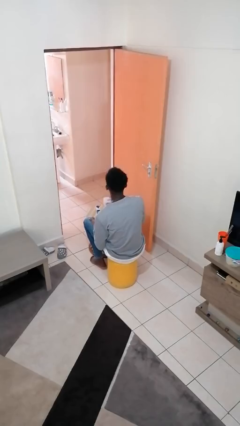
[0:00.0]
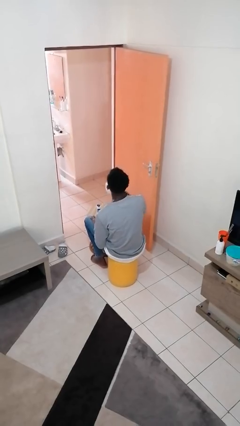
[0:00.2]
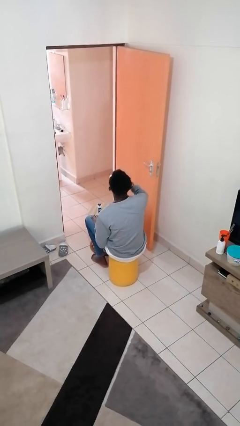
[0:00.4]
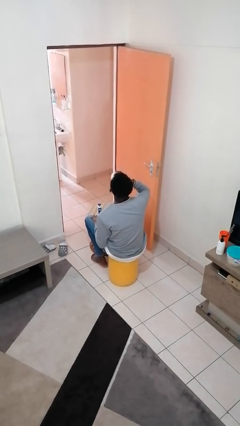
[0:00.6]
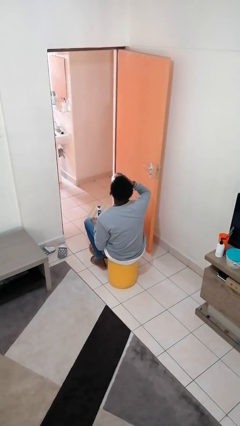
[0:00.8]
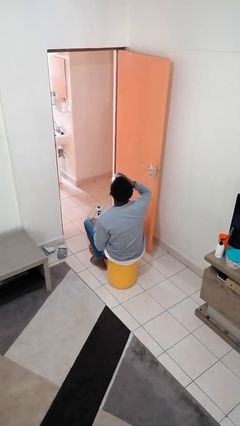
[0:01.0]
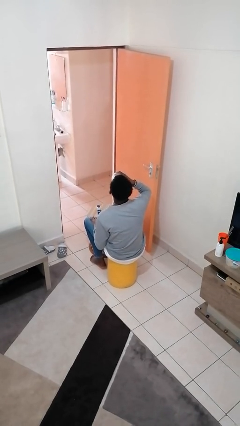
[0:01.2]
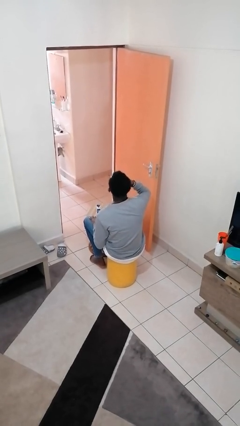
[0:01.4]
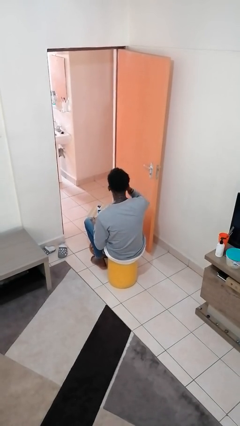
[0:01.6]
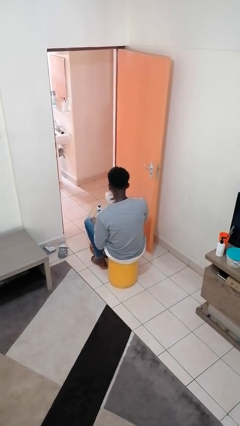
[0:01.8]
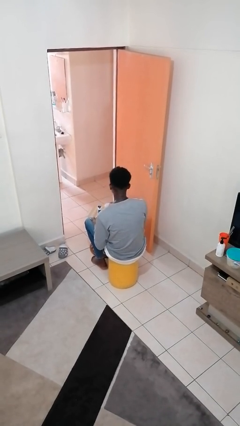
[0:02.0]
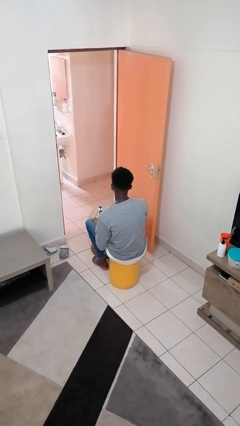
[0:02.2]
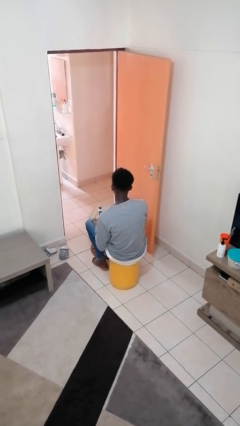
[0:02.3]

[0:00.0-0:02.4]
person drinks from cup

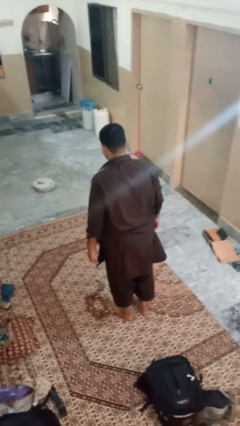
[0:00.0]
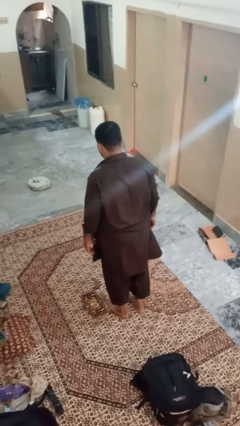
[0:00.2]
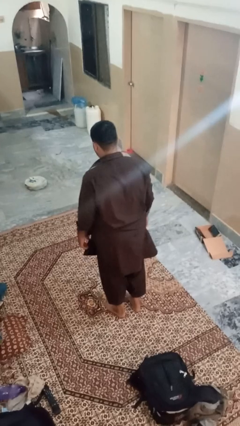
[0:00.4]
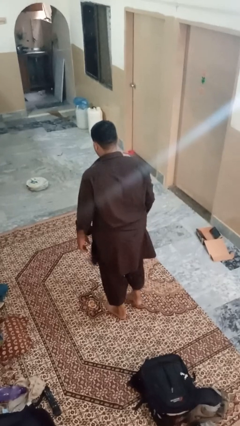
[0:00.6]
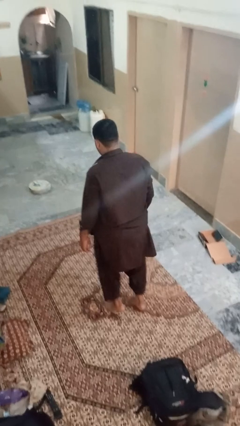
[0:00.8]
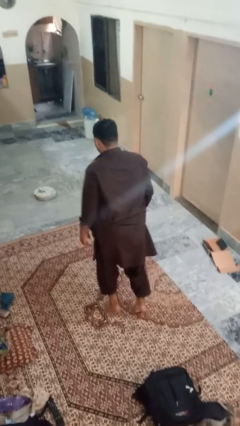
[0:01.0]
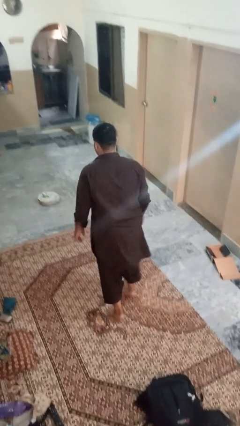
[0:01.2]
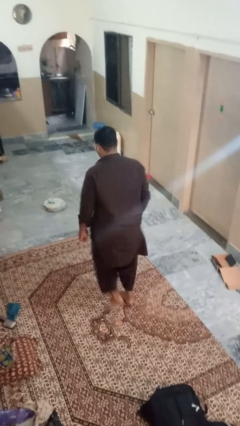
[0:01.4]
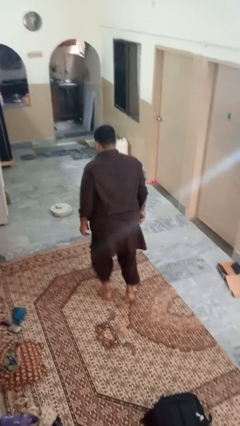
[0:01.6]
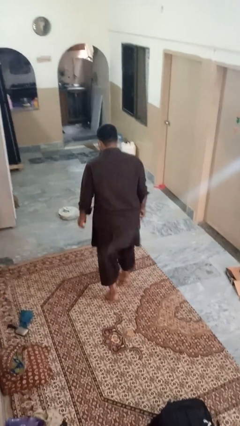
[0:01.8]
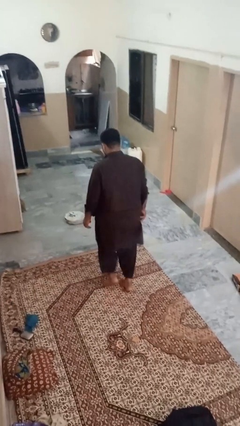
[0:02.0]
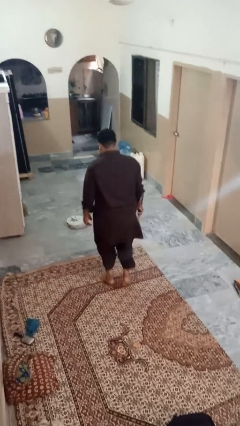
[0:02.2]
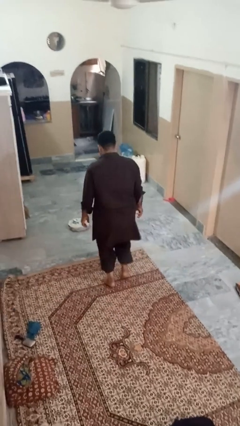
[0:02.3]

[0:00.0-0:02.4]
person walks tiptoe

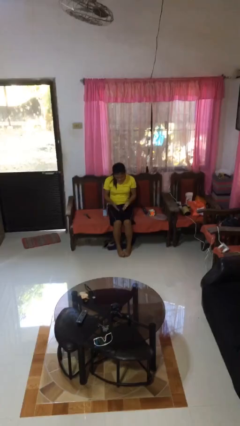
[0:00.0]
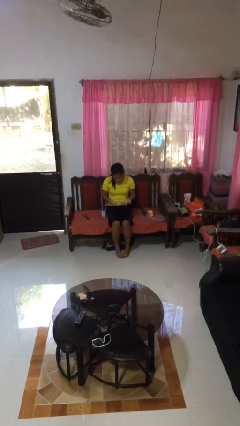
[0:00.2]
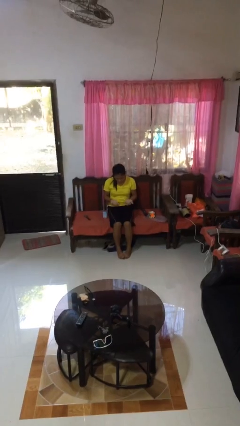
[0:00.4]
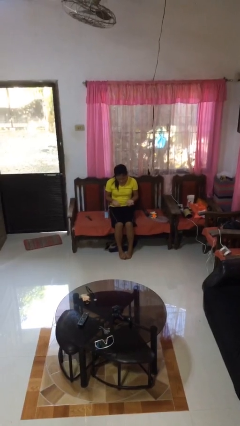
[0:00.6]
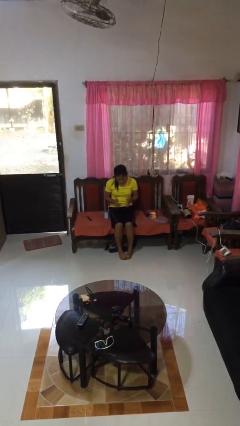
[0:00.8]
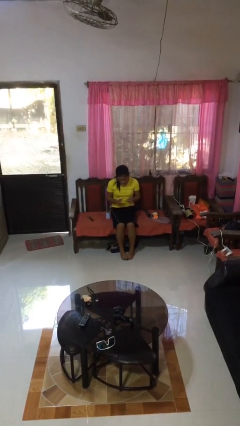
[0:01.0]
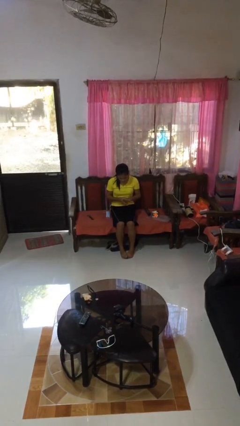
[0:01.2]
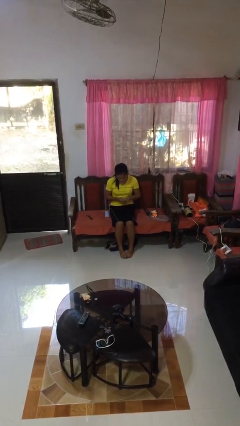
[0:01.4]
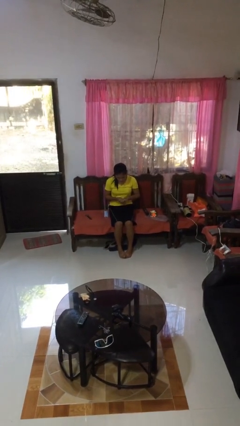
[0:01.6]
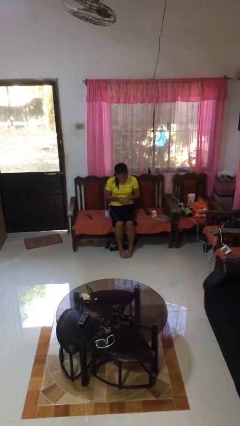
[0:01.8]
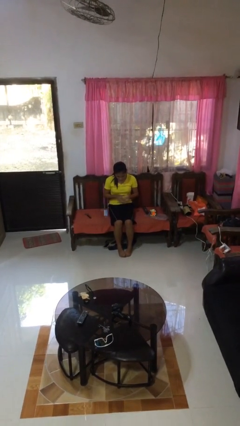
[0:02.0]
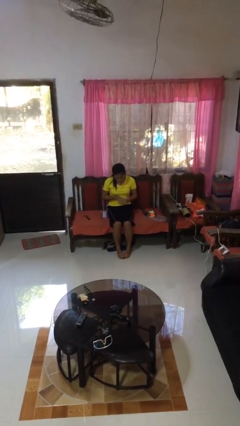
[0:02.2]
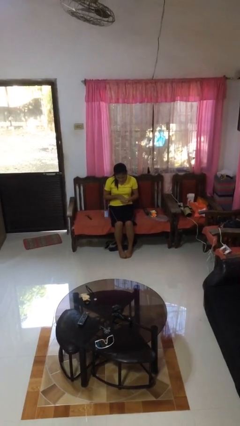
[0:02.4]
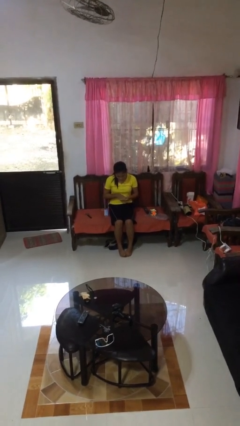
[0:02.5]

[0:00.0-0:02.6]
person looks at hands in lap

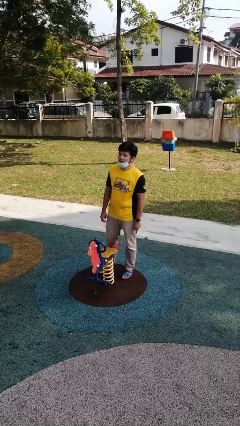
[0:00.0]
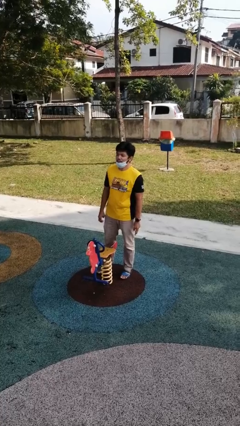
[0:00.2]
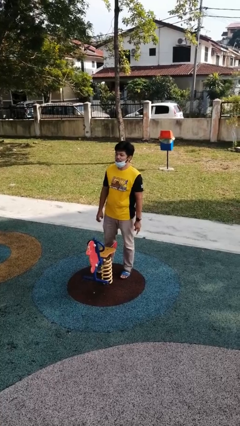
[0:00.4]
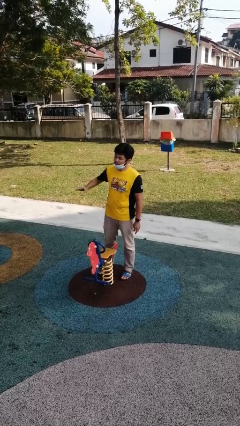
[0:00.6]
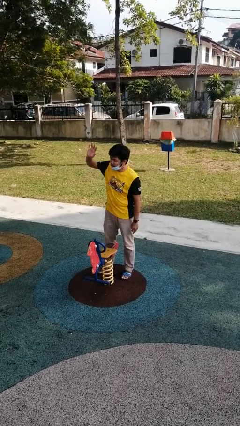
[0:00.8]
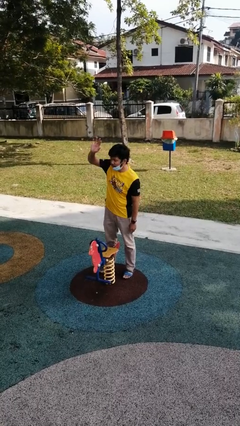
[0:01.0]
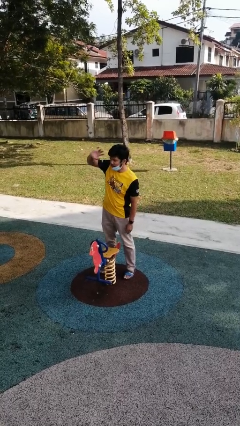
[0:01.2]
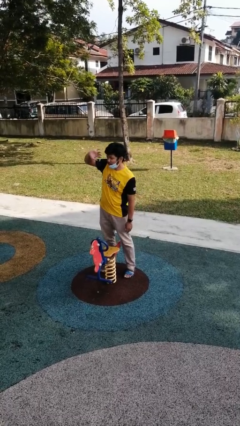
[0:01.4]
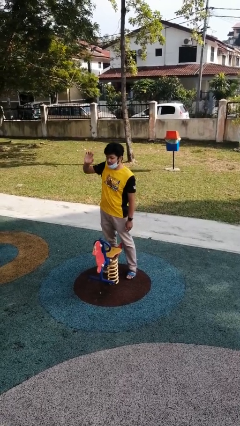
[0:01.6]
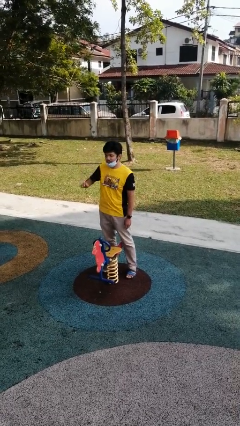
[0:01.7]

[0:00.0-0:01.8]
person waves at person

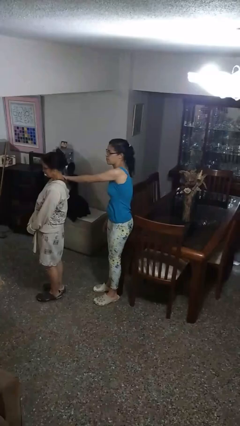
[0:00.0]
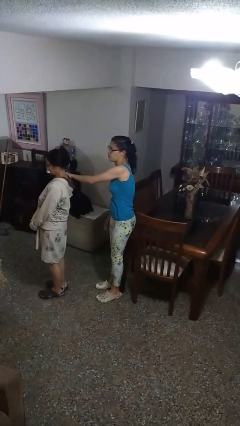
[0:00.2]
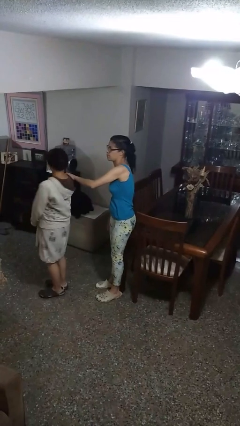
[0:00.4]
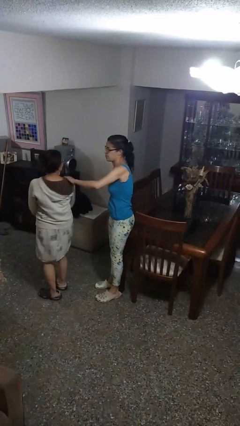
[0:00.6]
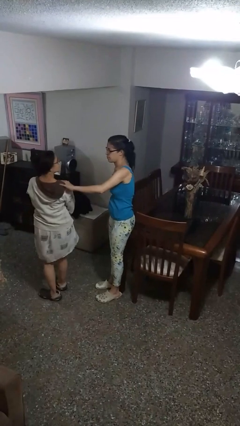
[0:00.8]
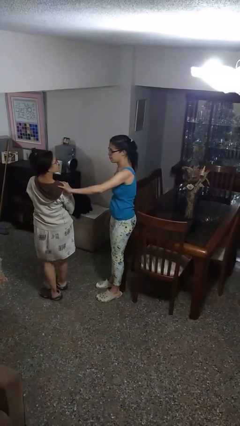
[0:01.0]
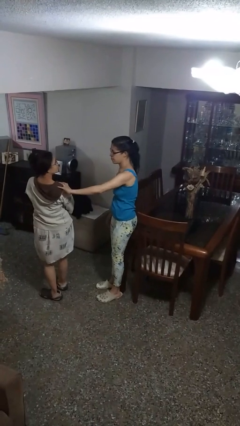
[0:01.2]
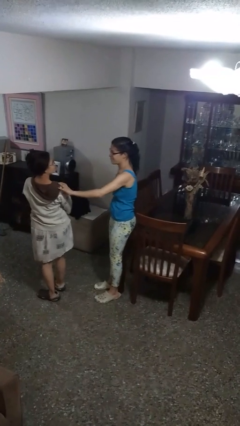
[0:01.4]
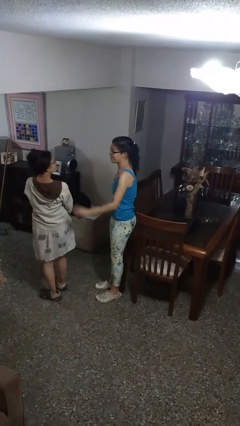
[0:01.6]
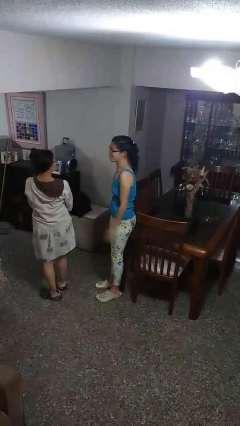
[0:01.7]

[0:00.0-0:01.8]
person spins person around

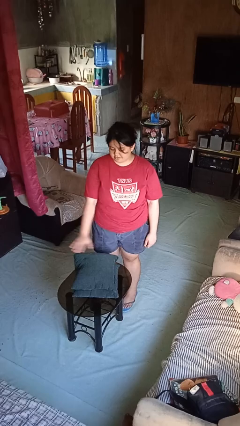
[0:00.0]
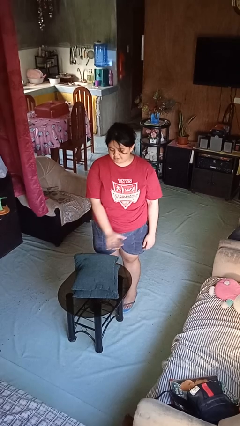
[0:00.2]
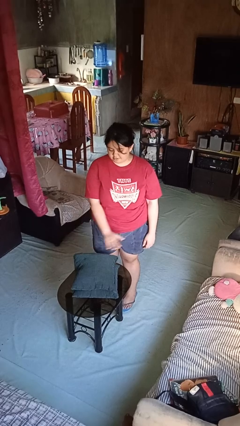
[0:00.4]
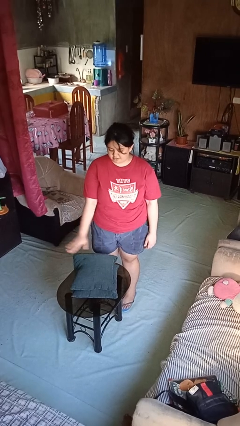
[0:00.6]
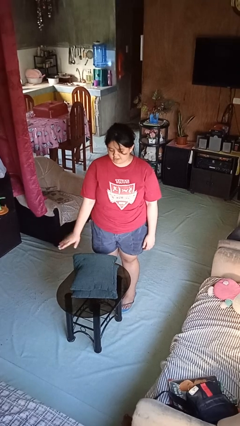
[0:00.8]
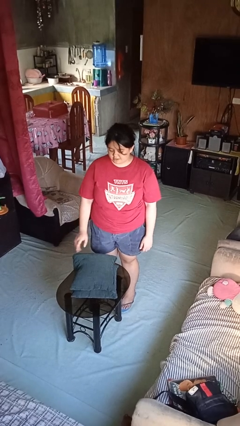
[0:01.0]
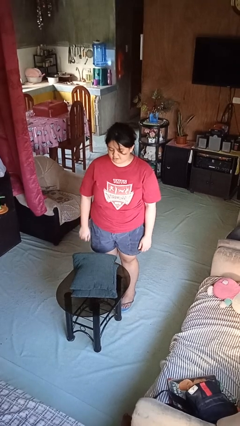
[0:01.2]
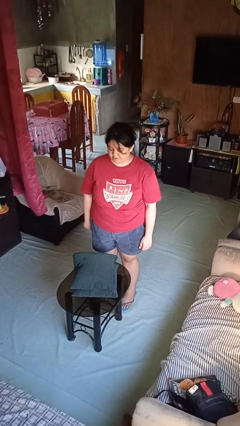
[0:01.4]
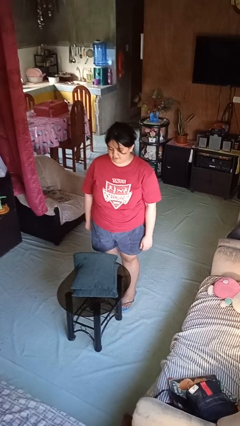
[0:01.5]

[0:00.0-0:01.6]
person waves hand over object

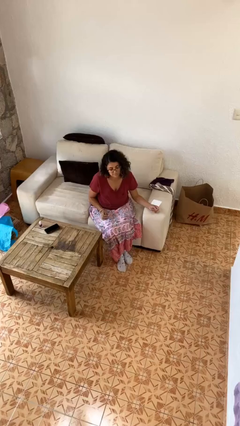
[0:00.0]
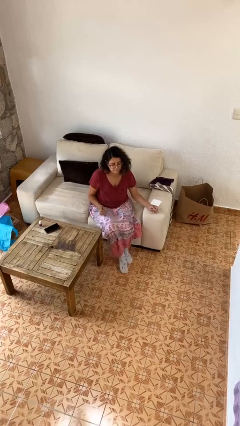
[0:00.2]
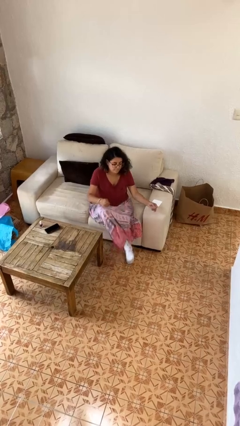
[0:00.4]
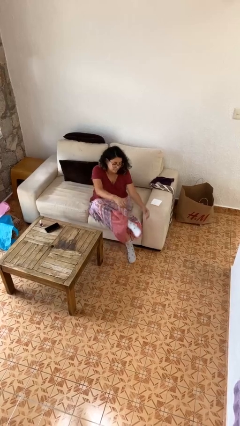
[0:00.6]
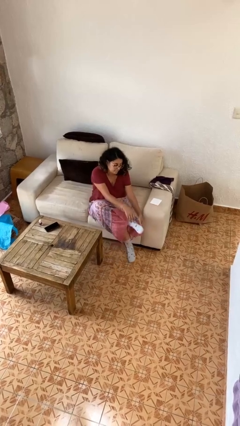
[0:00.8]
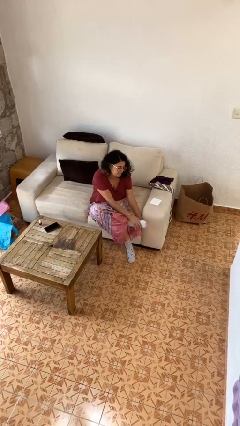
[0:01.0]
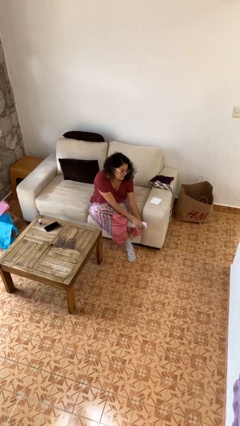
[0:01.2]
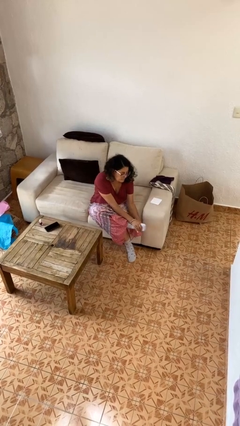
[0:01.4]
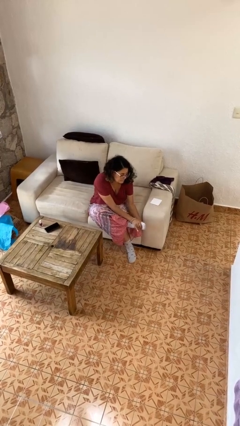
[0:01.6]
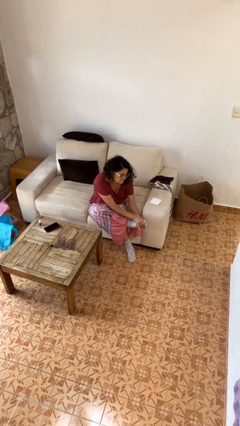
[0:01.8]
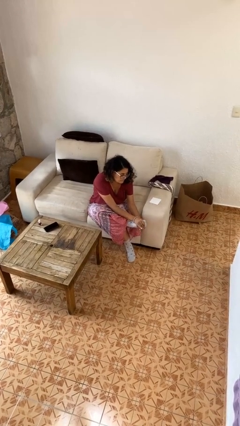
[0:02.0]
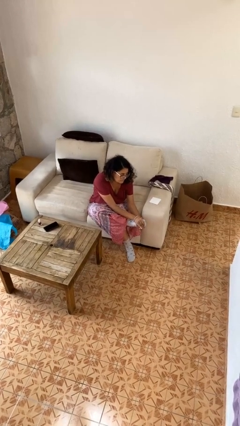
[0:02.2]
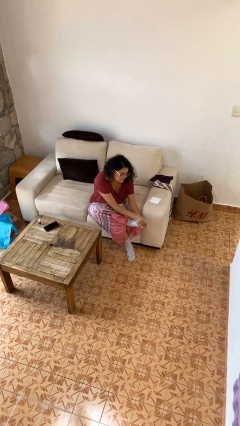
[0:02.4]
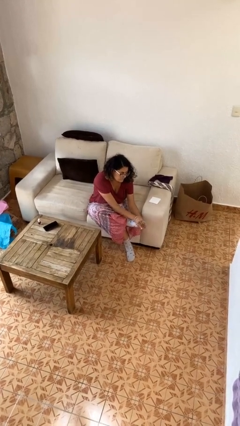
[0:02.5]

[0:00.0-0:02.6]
person rubs foot

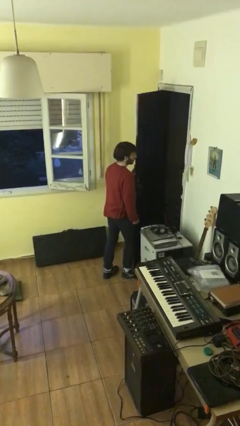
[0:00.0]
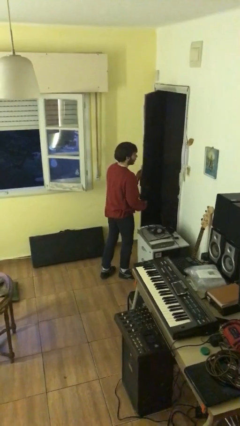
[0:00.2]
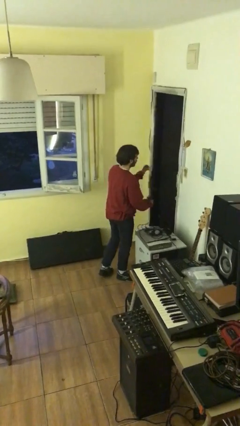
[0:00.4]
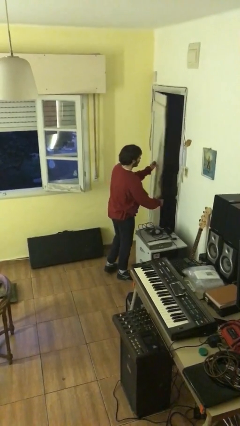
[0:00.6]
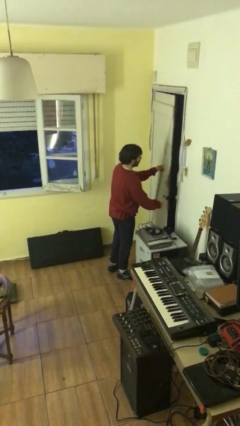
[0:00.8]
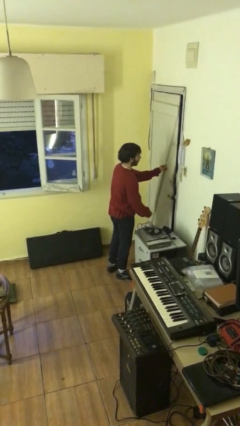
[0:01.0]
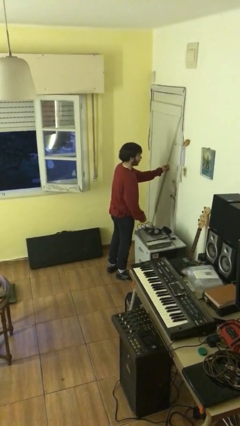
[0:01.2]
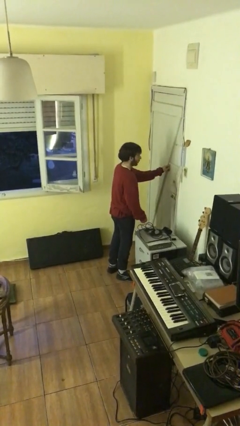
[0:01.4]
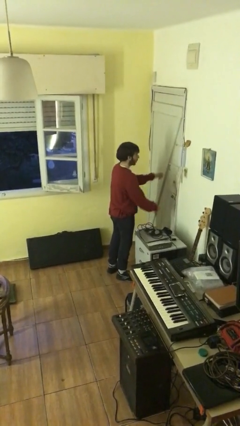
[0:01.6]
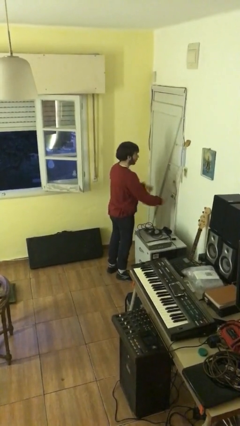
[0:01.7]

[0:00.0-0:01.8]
person closes facility door
